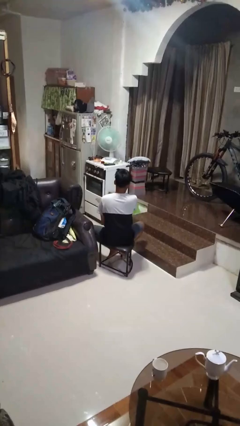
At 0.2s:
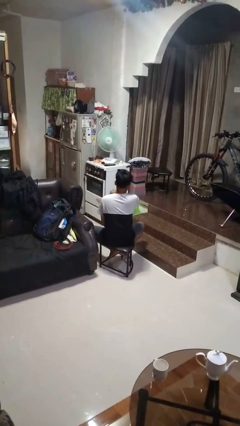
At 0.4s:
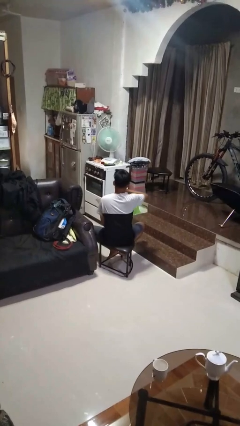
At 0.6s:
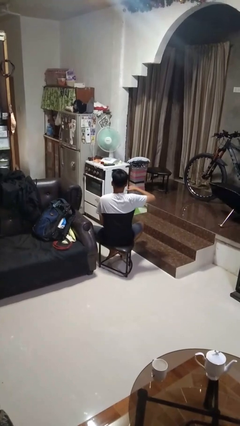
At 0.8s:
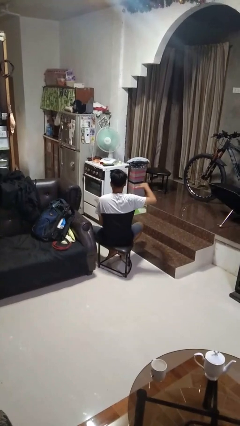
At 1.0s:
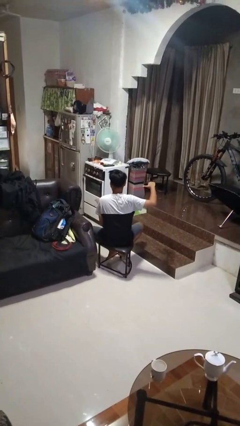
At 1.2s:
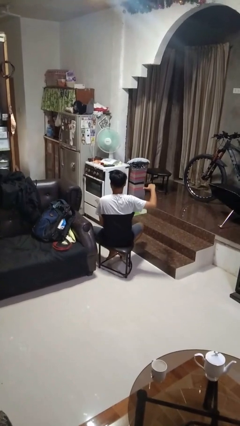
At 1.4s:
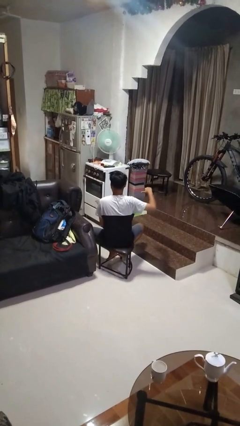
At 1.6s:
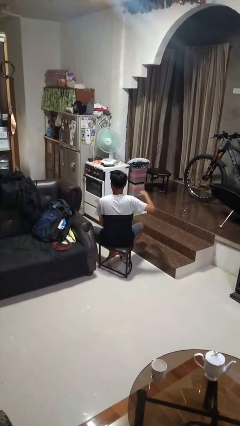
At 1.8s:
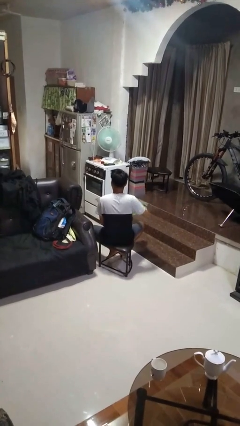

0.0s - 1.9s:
person gestures cut

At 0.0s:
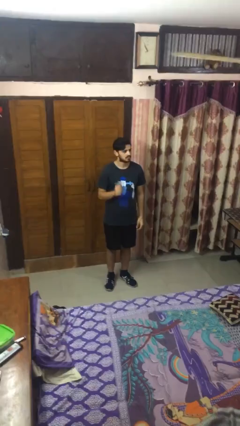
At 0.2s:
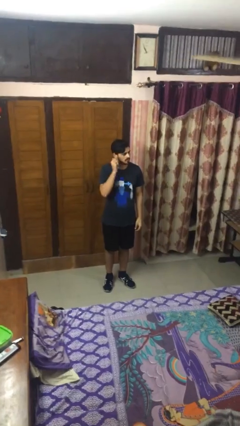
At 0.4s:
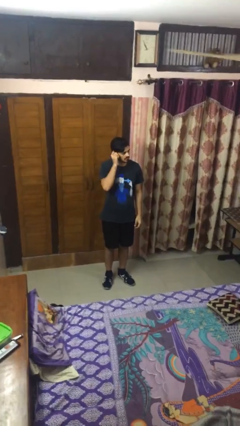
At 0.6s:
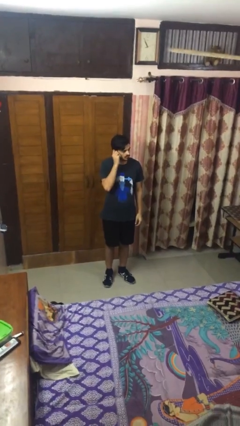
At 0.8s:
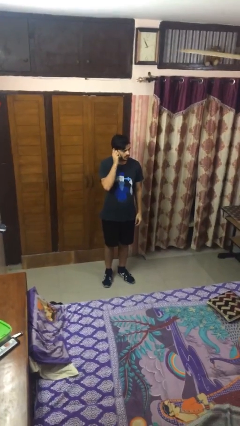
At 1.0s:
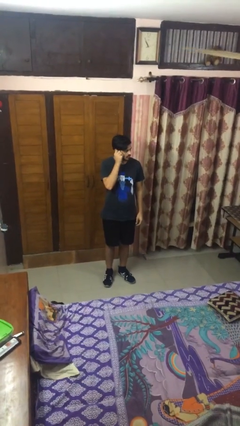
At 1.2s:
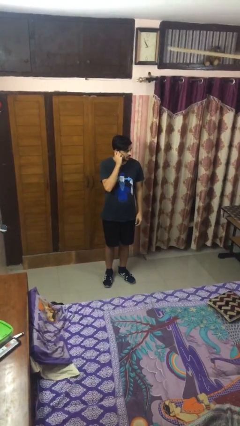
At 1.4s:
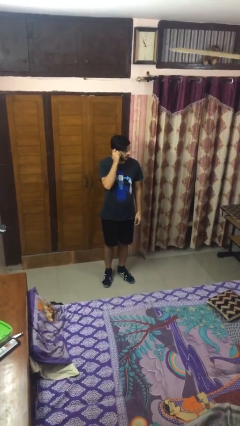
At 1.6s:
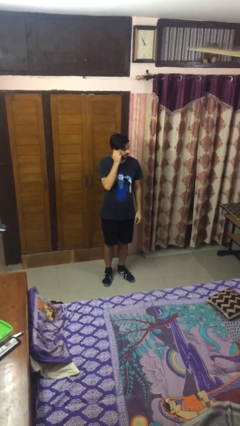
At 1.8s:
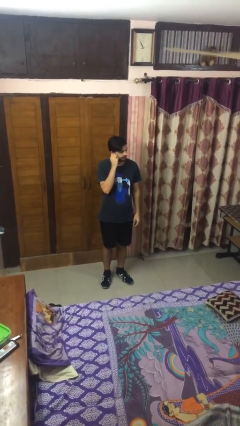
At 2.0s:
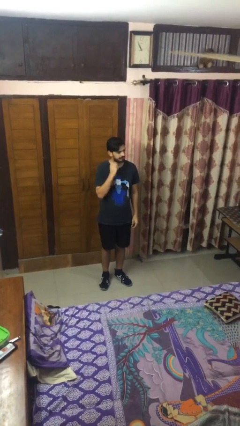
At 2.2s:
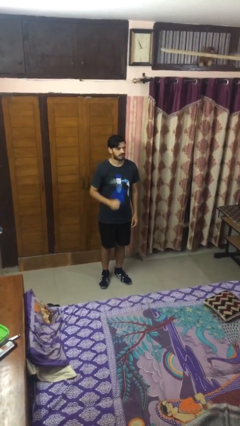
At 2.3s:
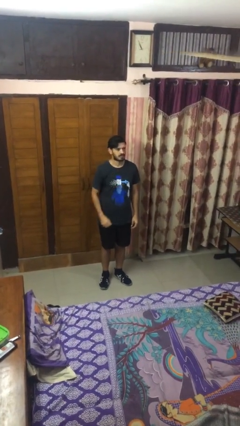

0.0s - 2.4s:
person touches earlobe

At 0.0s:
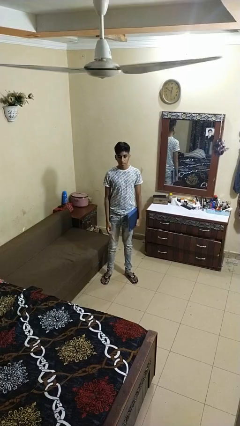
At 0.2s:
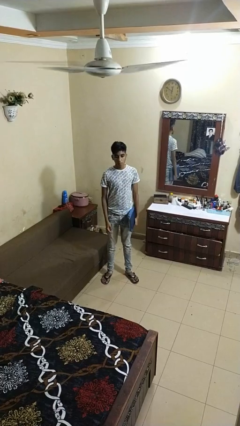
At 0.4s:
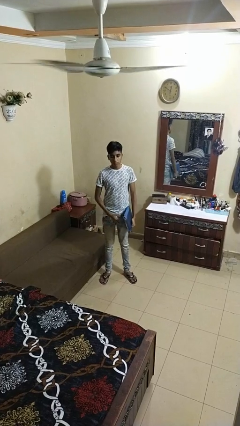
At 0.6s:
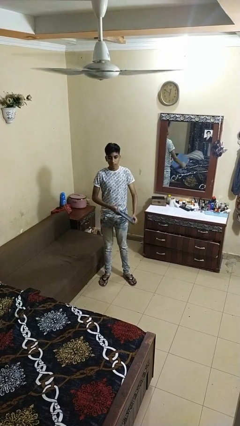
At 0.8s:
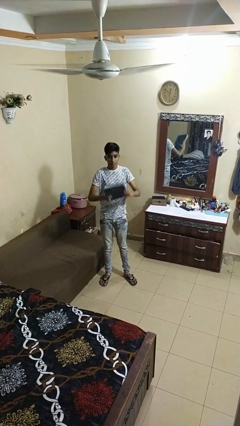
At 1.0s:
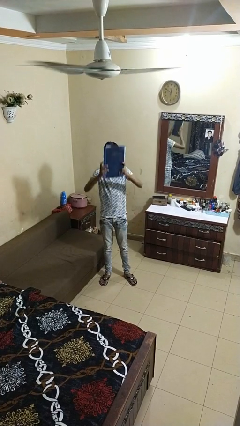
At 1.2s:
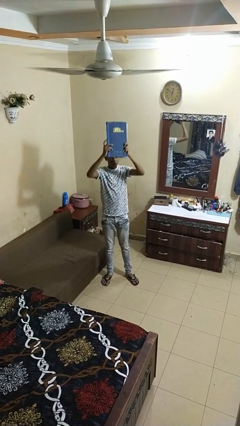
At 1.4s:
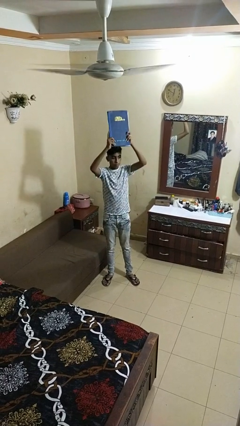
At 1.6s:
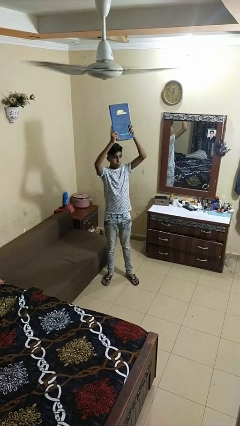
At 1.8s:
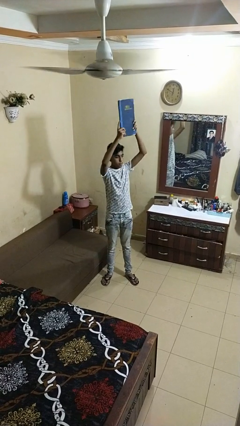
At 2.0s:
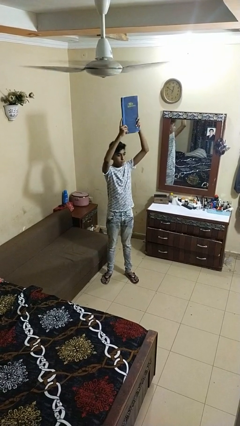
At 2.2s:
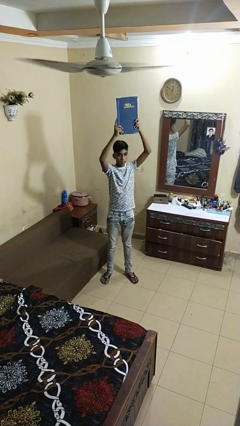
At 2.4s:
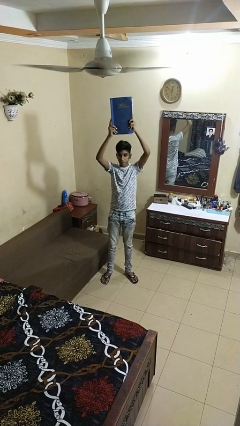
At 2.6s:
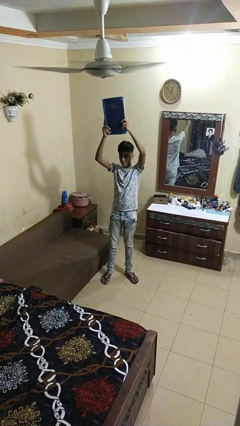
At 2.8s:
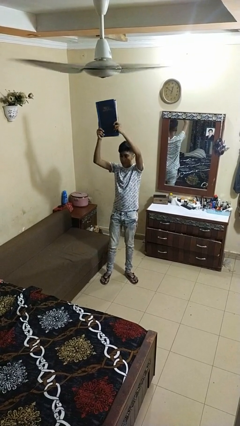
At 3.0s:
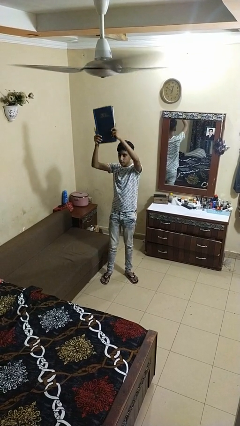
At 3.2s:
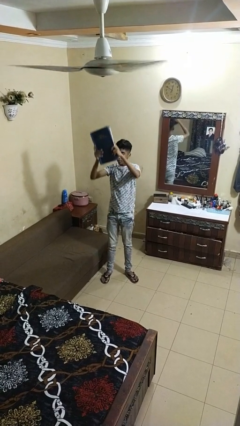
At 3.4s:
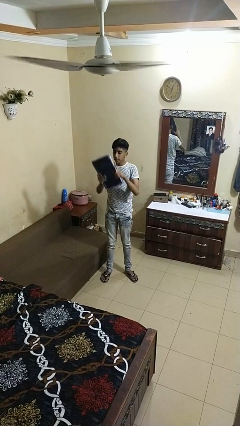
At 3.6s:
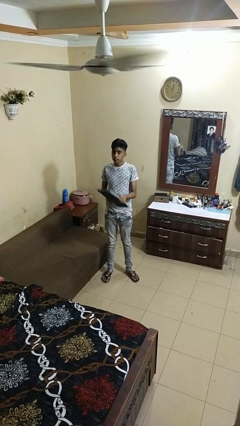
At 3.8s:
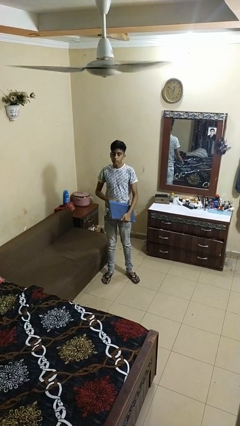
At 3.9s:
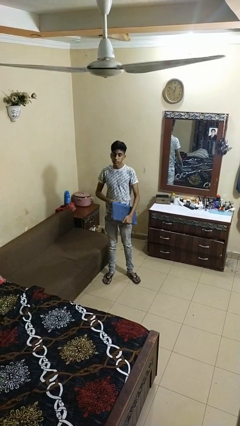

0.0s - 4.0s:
person holds object above head

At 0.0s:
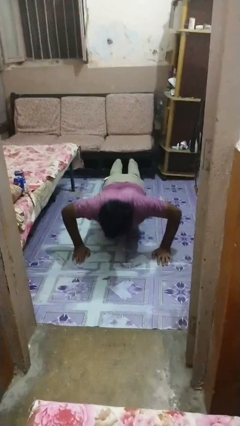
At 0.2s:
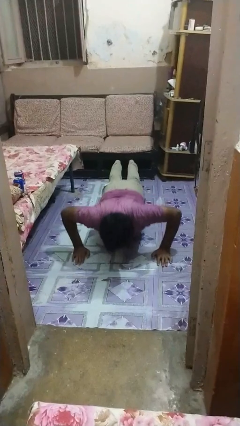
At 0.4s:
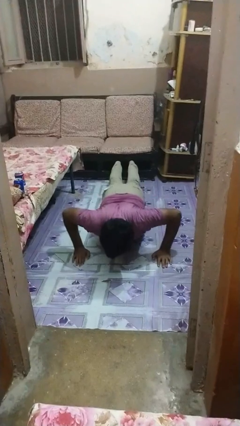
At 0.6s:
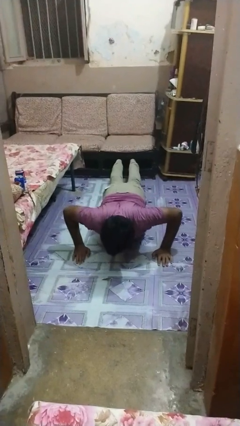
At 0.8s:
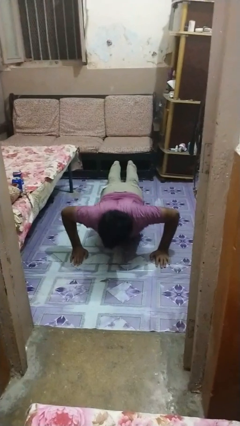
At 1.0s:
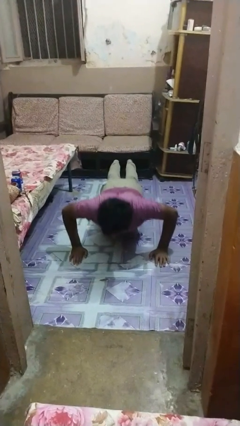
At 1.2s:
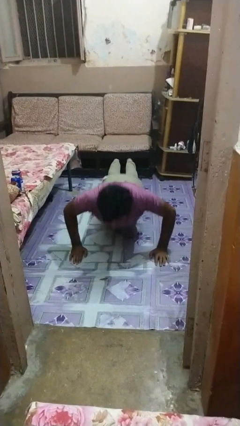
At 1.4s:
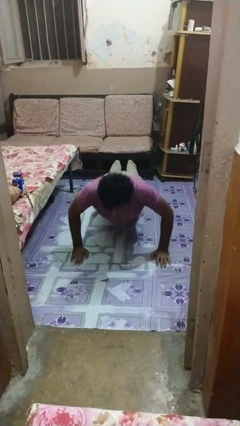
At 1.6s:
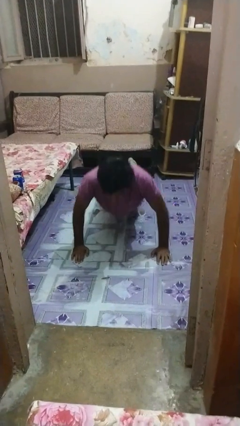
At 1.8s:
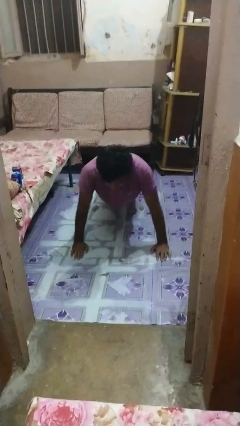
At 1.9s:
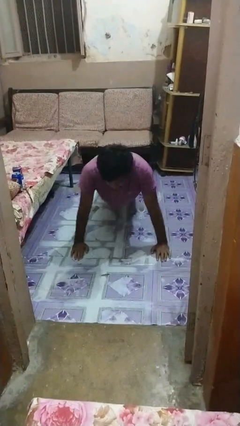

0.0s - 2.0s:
person exercises with pushup

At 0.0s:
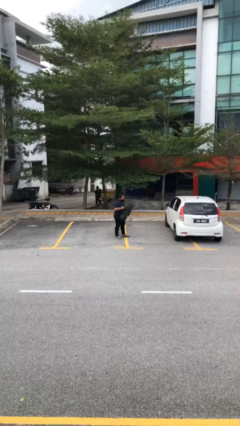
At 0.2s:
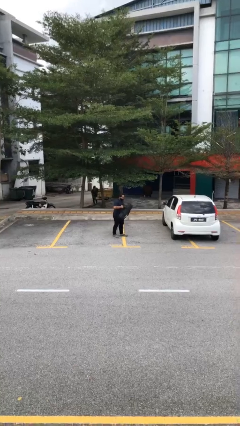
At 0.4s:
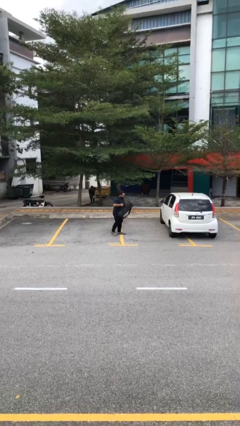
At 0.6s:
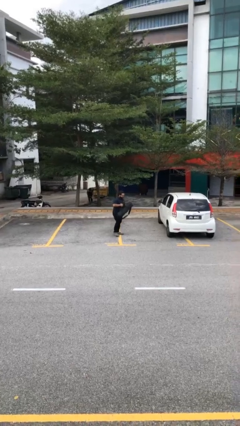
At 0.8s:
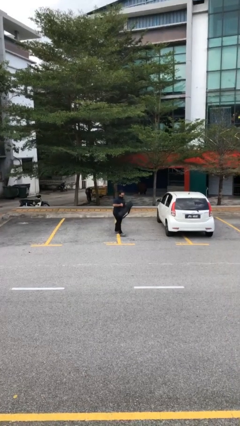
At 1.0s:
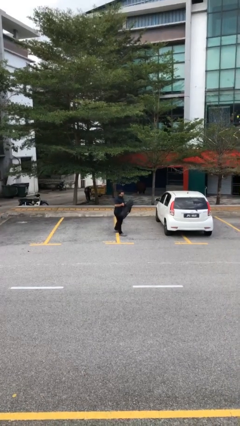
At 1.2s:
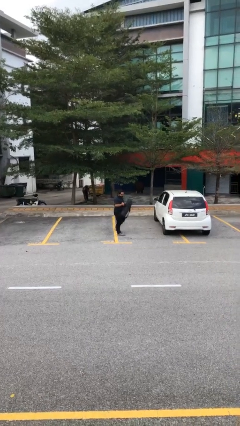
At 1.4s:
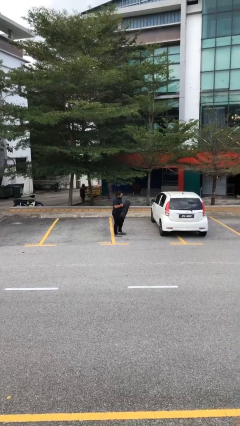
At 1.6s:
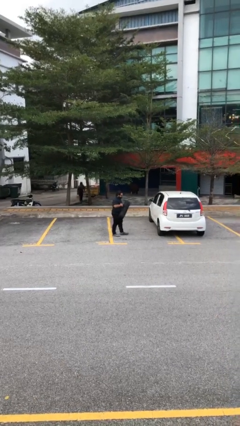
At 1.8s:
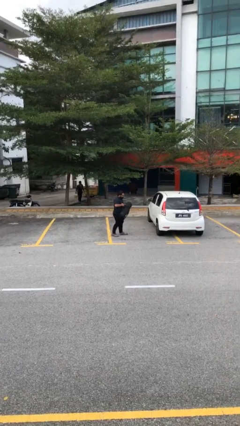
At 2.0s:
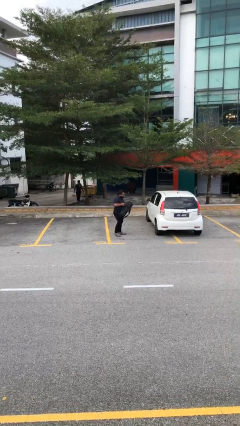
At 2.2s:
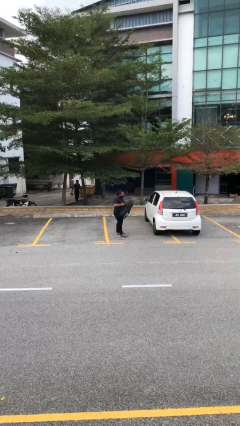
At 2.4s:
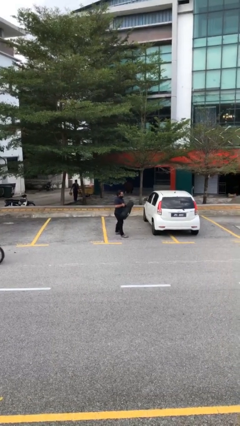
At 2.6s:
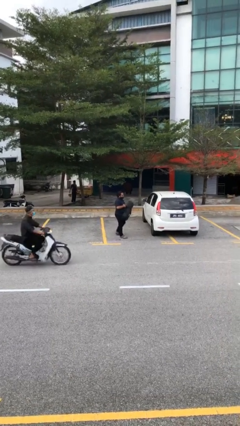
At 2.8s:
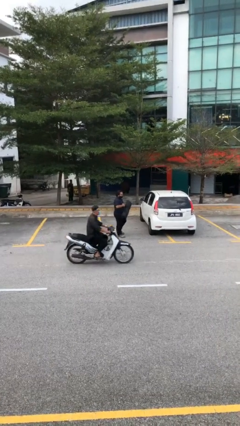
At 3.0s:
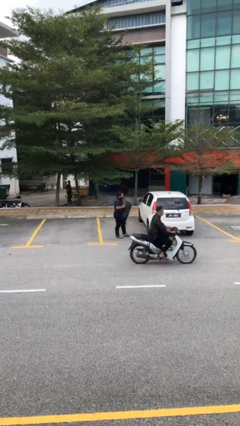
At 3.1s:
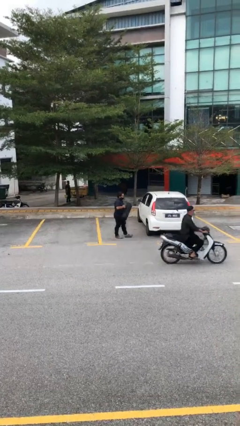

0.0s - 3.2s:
person carries heavy object

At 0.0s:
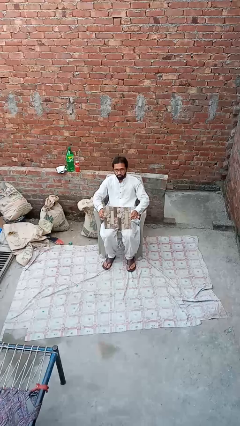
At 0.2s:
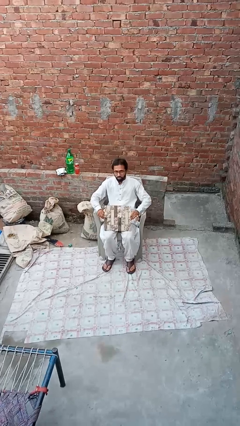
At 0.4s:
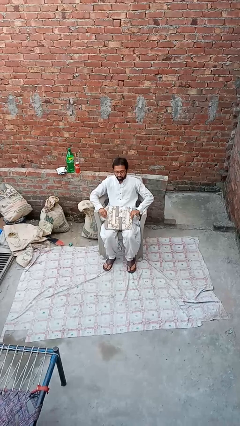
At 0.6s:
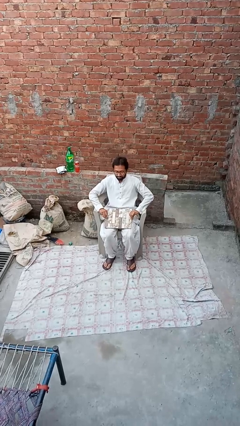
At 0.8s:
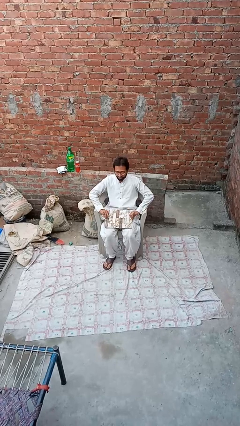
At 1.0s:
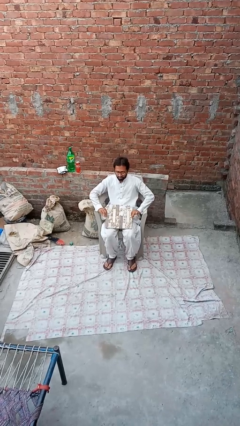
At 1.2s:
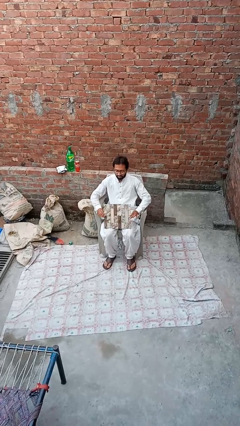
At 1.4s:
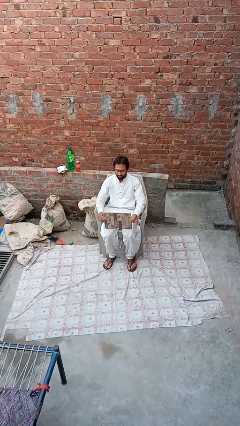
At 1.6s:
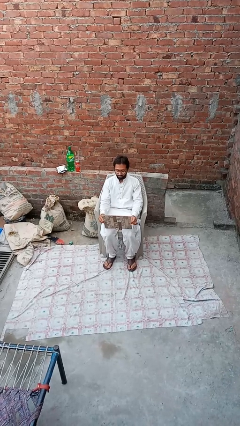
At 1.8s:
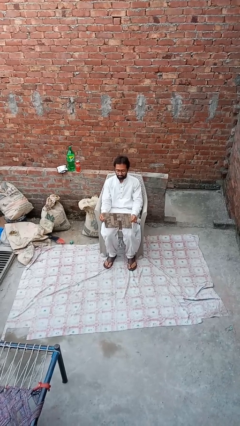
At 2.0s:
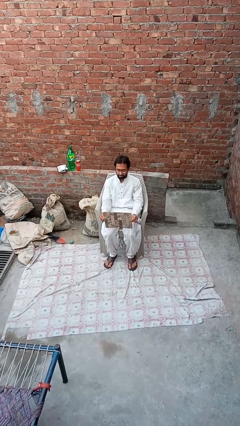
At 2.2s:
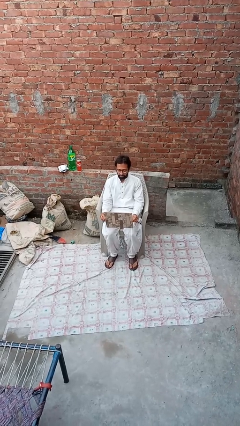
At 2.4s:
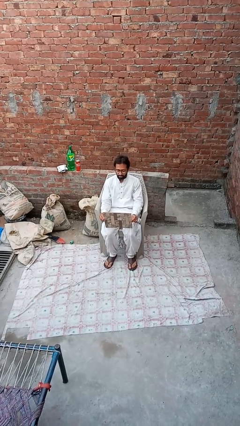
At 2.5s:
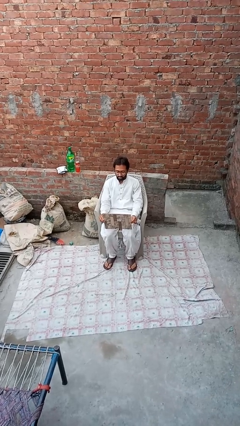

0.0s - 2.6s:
person opens laptop

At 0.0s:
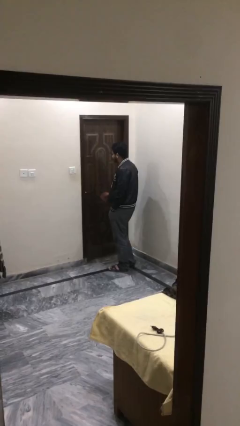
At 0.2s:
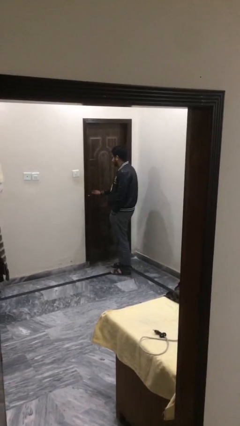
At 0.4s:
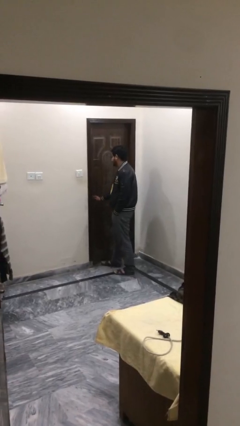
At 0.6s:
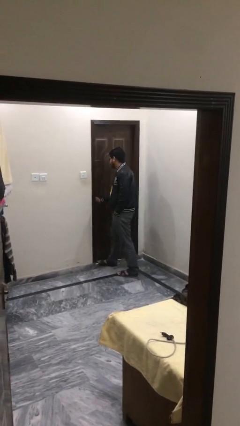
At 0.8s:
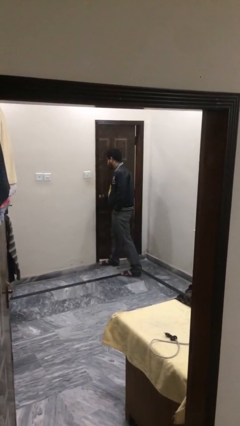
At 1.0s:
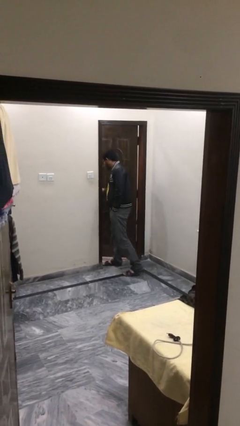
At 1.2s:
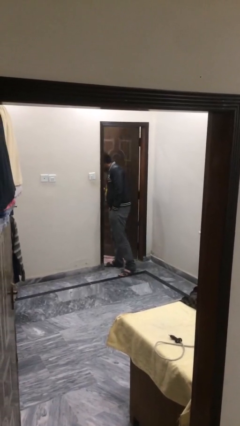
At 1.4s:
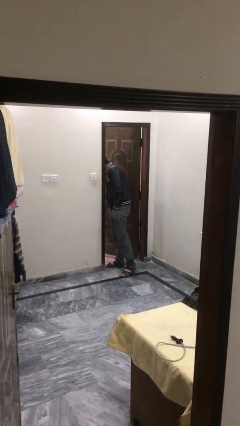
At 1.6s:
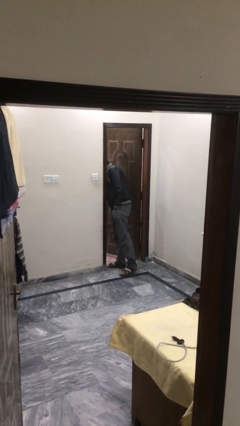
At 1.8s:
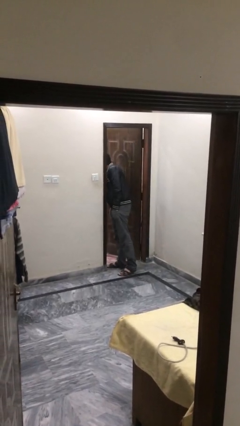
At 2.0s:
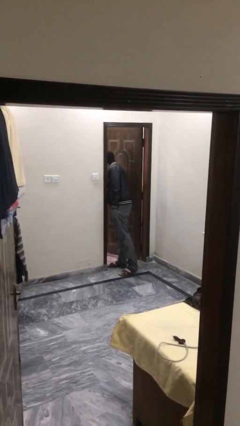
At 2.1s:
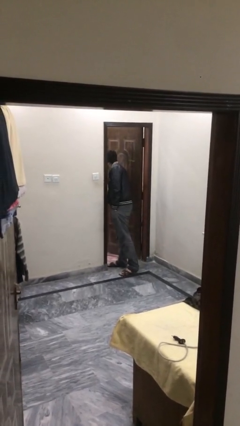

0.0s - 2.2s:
person opens facility door
